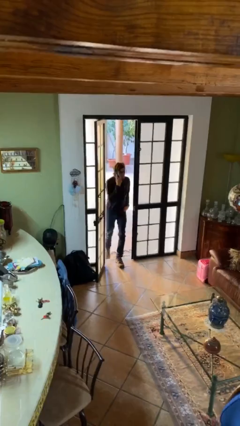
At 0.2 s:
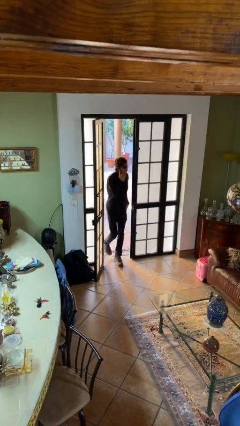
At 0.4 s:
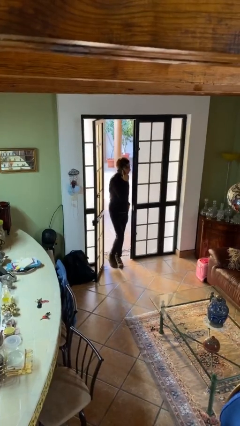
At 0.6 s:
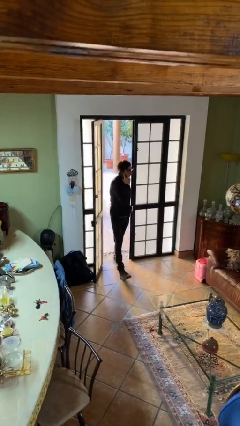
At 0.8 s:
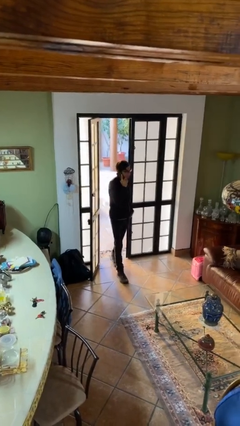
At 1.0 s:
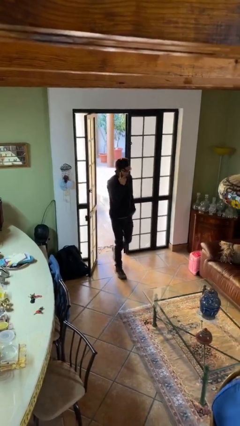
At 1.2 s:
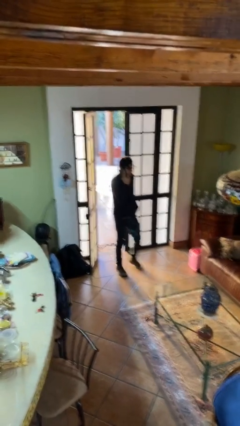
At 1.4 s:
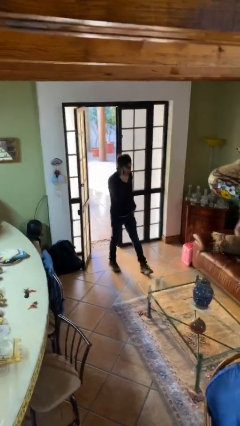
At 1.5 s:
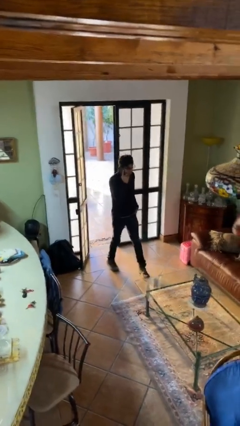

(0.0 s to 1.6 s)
person enters scene through structure

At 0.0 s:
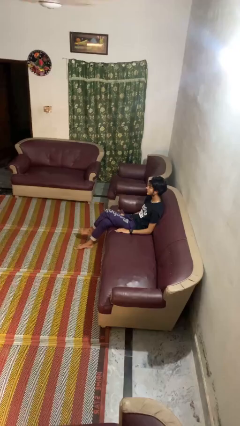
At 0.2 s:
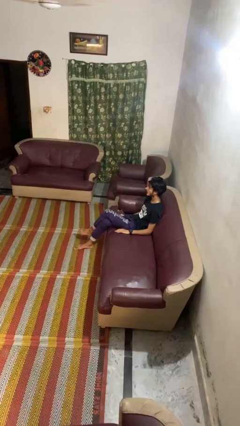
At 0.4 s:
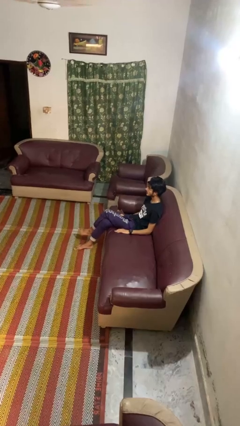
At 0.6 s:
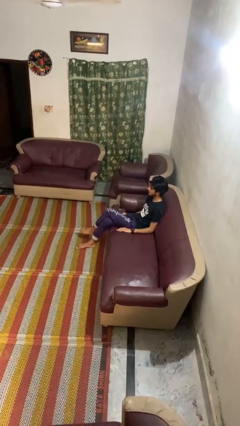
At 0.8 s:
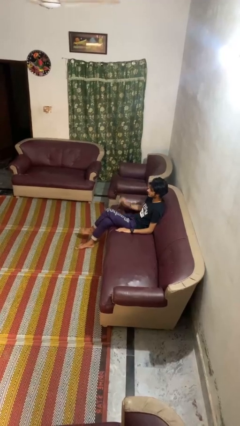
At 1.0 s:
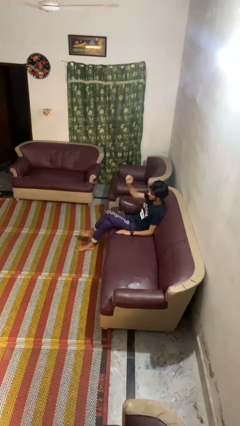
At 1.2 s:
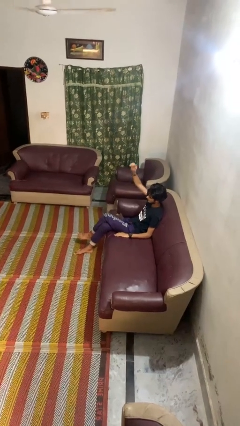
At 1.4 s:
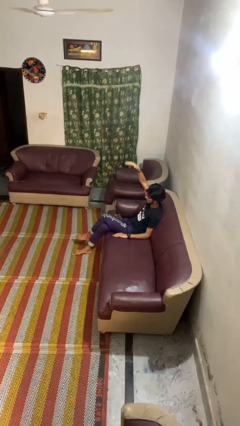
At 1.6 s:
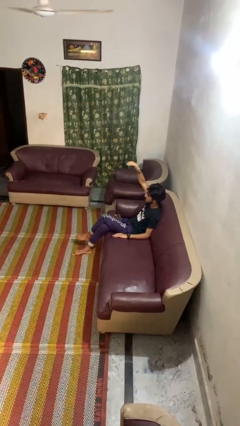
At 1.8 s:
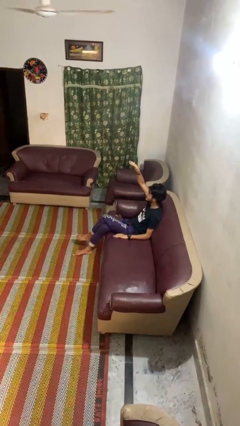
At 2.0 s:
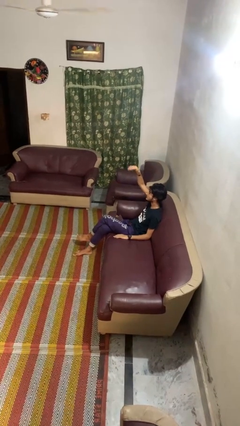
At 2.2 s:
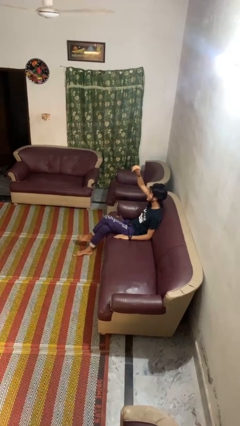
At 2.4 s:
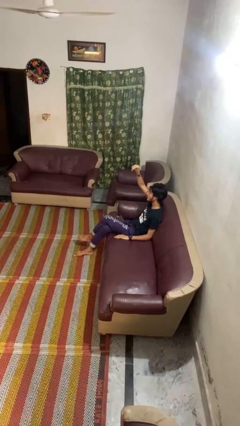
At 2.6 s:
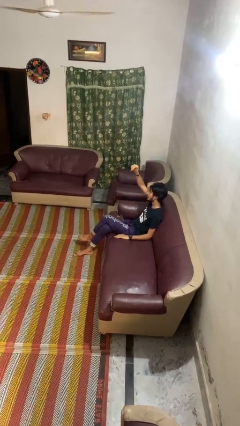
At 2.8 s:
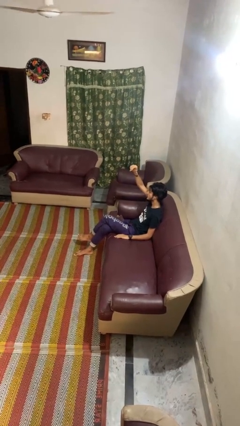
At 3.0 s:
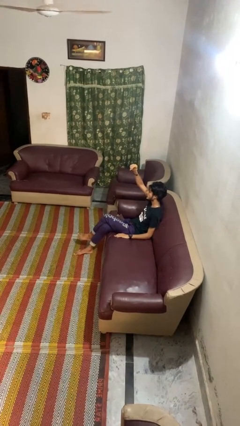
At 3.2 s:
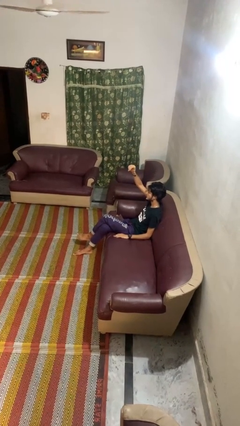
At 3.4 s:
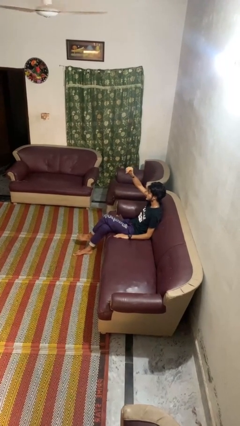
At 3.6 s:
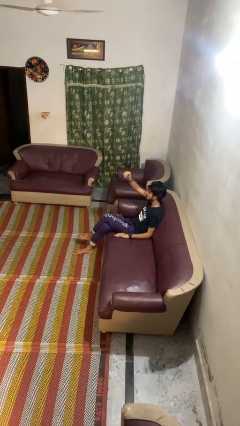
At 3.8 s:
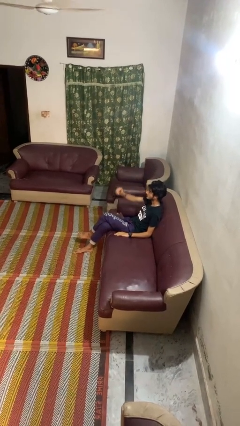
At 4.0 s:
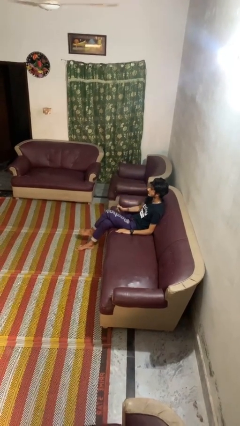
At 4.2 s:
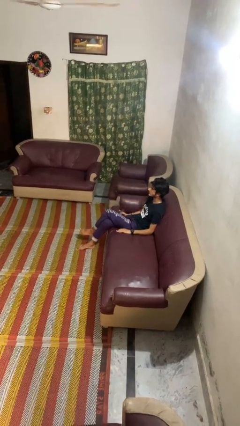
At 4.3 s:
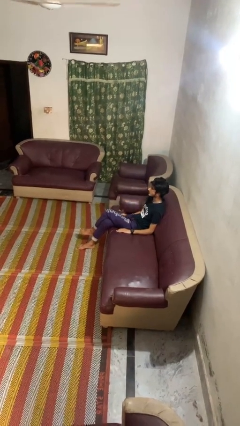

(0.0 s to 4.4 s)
person gestures come here

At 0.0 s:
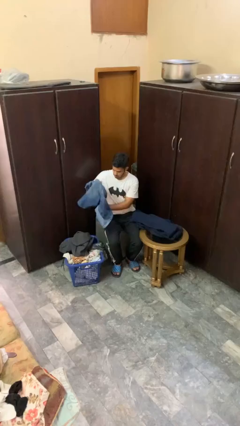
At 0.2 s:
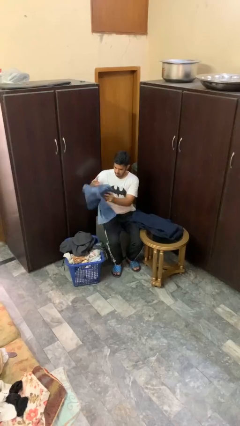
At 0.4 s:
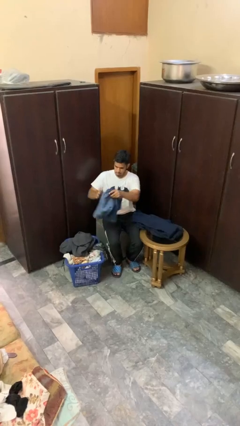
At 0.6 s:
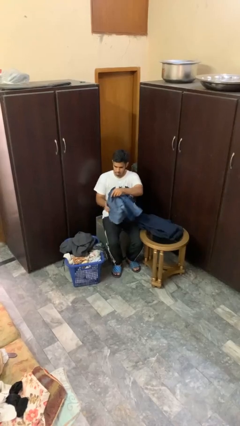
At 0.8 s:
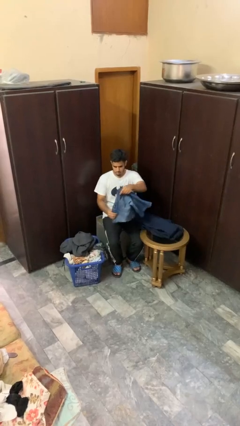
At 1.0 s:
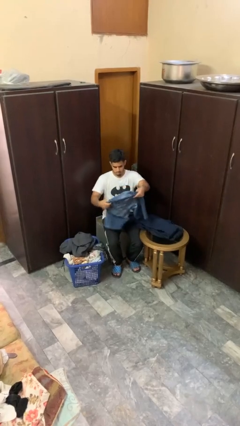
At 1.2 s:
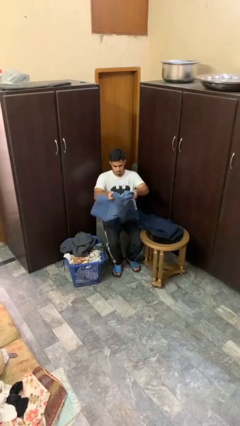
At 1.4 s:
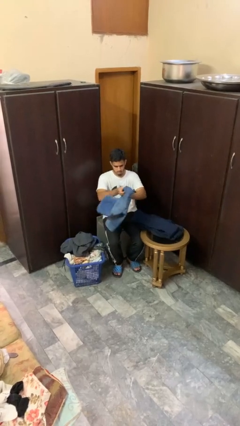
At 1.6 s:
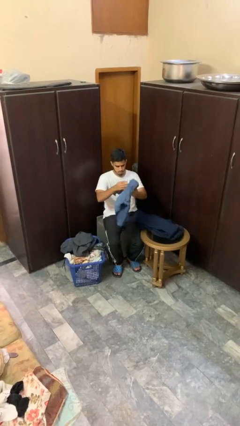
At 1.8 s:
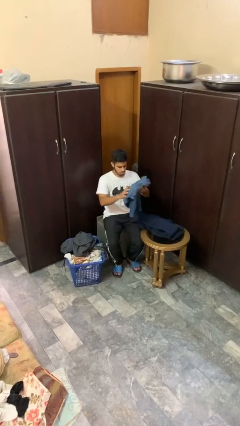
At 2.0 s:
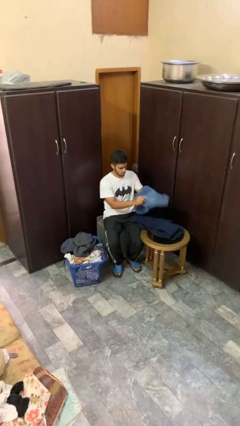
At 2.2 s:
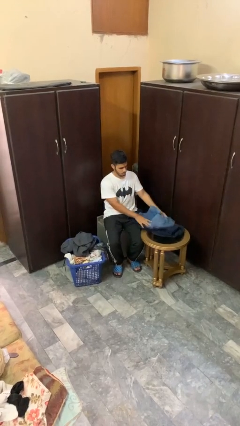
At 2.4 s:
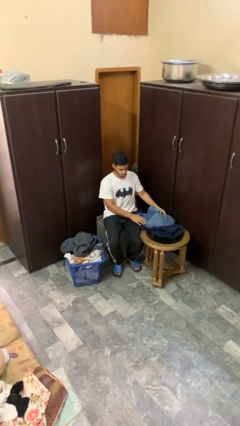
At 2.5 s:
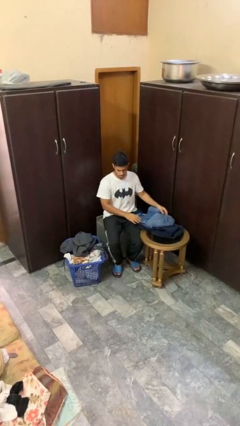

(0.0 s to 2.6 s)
person folds pants

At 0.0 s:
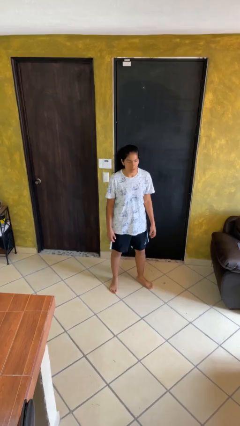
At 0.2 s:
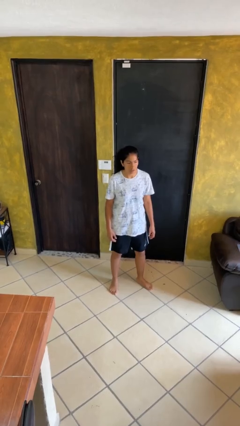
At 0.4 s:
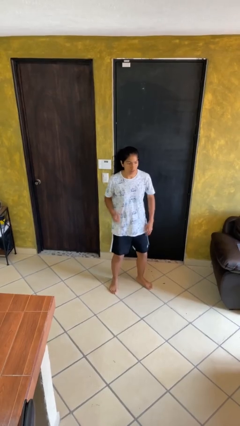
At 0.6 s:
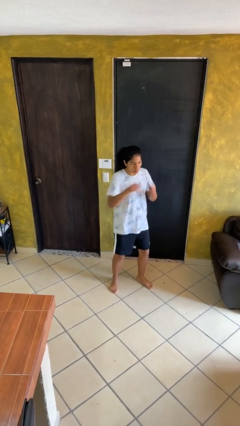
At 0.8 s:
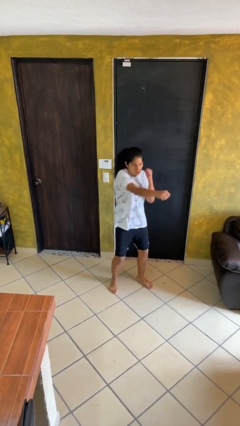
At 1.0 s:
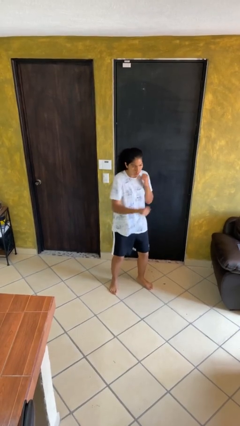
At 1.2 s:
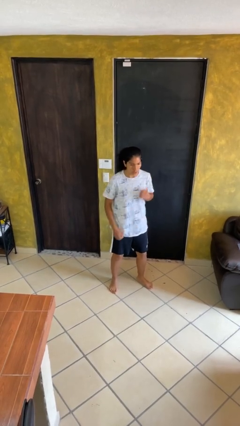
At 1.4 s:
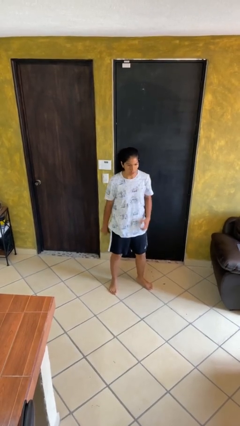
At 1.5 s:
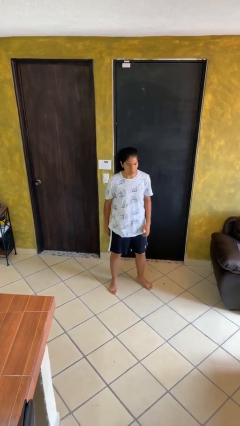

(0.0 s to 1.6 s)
person punches

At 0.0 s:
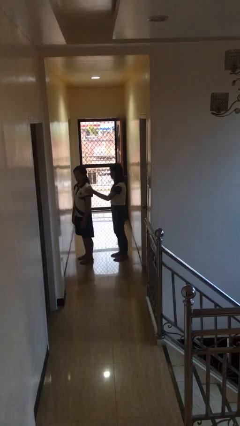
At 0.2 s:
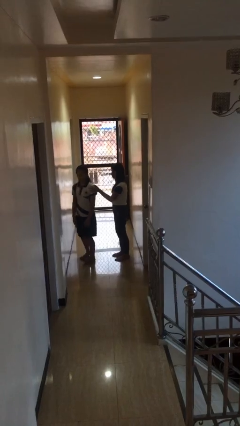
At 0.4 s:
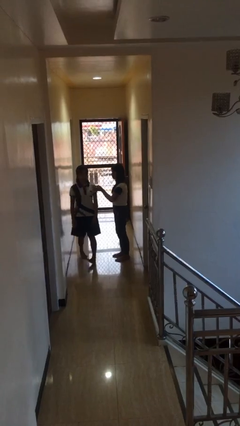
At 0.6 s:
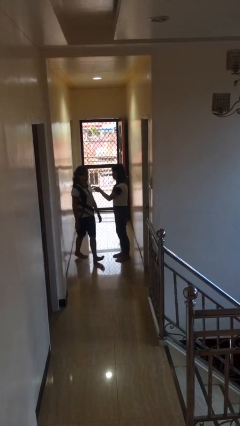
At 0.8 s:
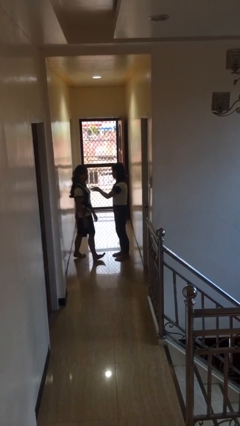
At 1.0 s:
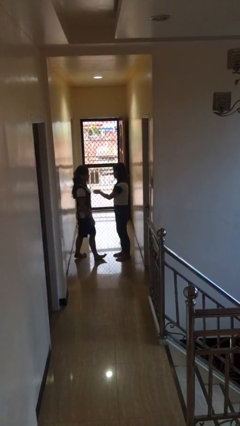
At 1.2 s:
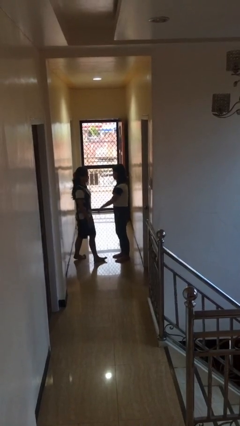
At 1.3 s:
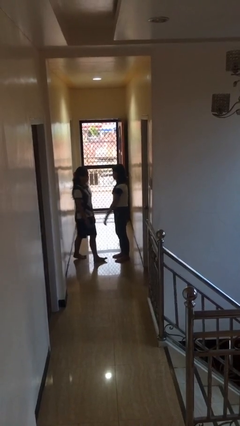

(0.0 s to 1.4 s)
person spins person around

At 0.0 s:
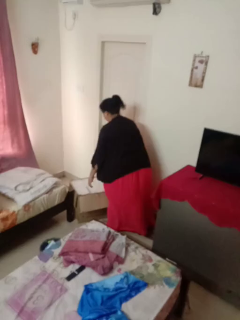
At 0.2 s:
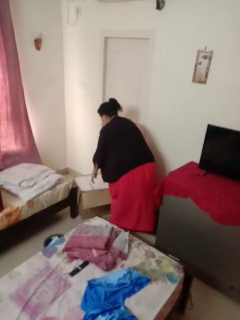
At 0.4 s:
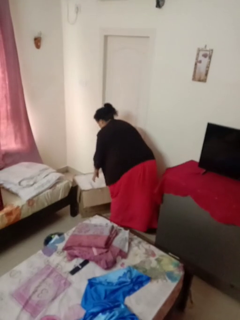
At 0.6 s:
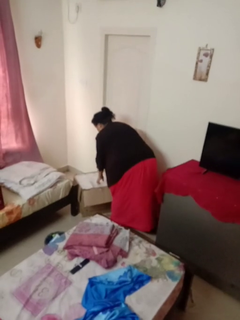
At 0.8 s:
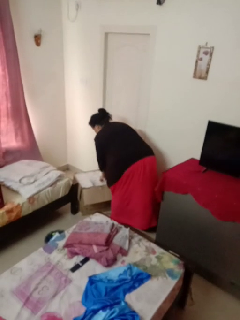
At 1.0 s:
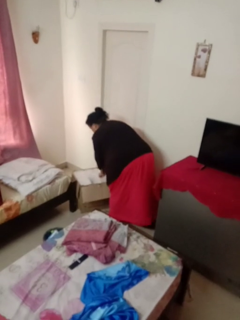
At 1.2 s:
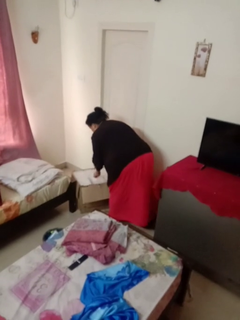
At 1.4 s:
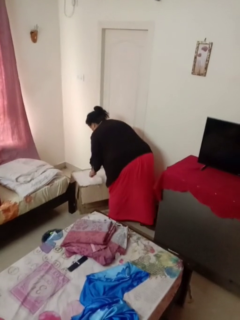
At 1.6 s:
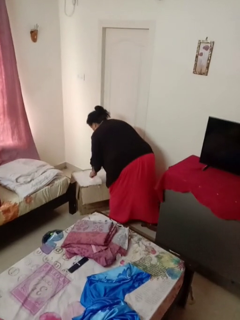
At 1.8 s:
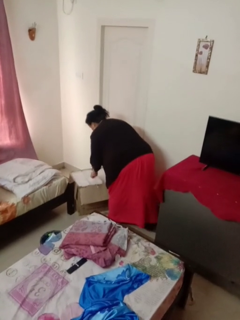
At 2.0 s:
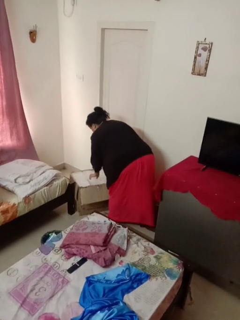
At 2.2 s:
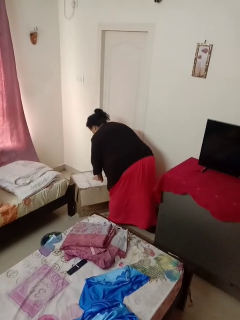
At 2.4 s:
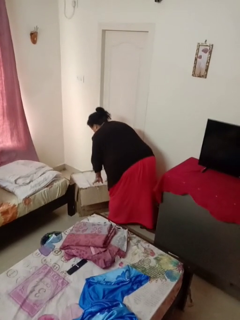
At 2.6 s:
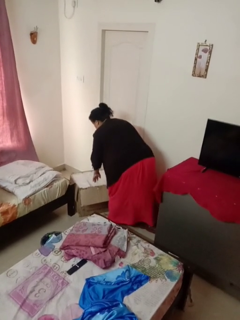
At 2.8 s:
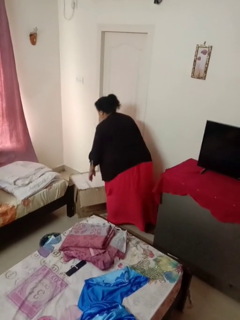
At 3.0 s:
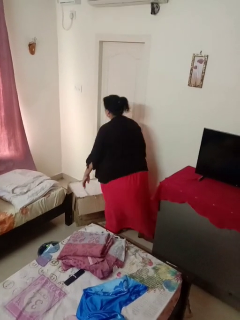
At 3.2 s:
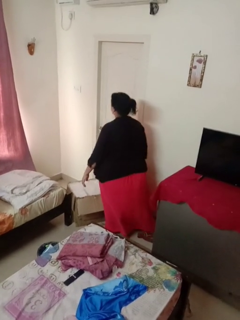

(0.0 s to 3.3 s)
person searches in box

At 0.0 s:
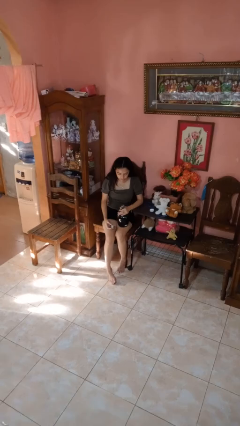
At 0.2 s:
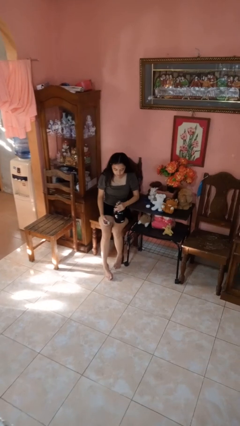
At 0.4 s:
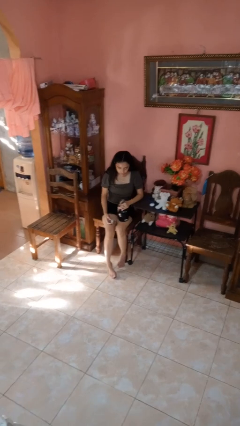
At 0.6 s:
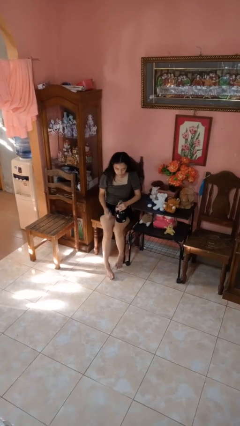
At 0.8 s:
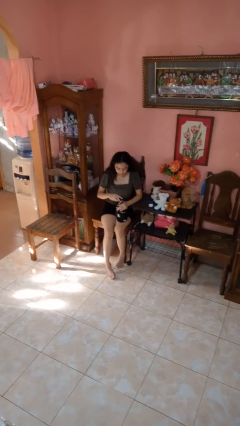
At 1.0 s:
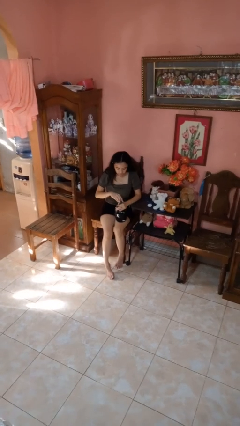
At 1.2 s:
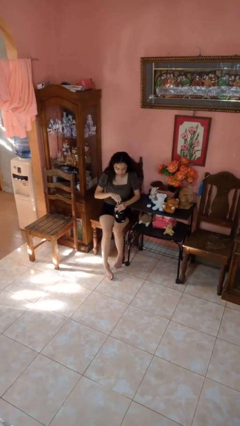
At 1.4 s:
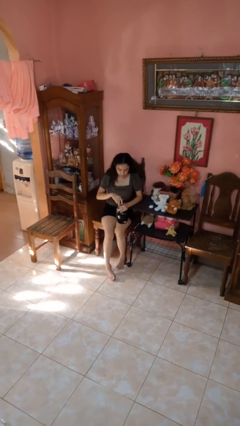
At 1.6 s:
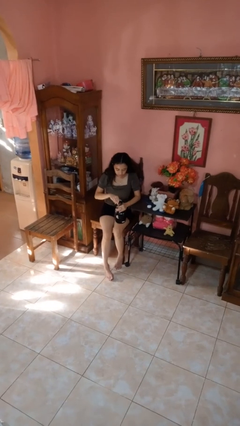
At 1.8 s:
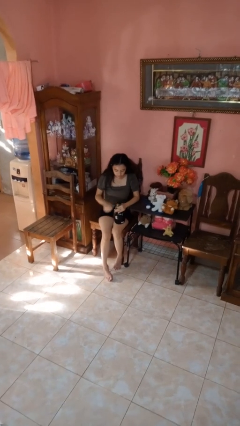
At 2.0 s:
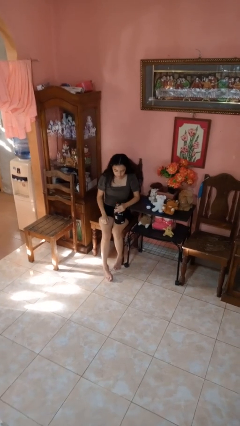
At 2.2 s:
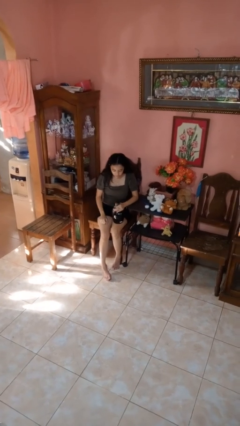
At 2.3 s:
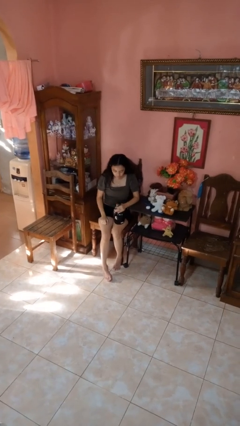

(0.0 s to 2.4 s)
person screws lid to bottle

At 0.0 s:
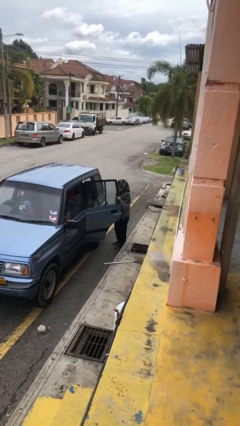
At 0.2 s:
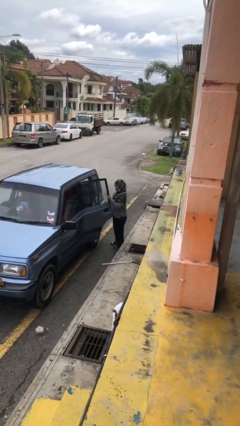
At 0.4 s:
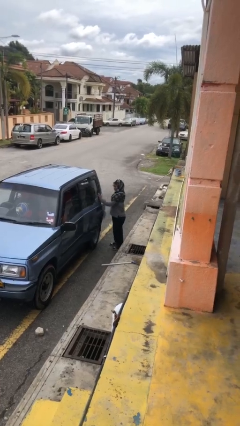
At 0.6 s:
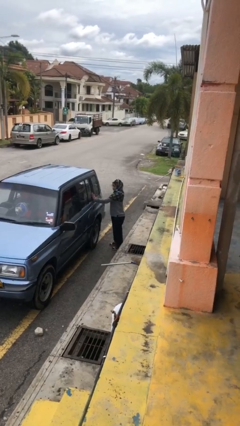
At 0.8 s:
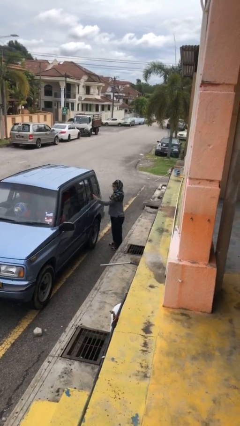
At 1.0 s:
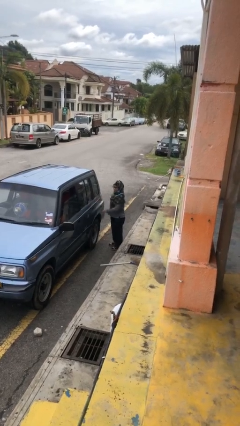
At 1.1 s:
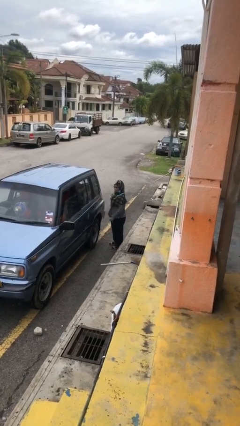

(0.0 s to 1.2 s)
person closes car door
